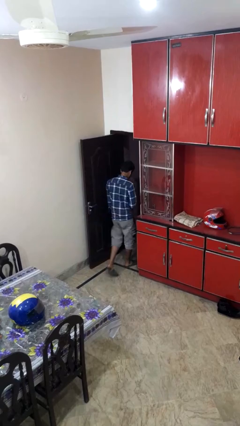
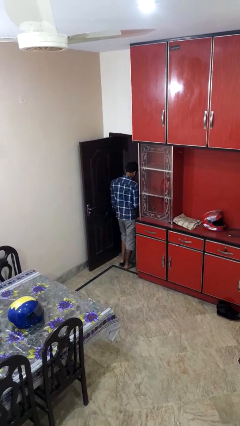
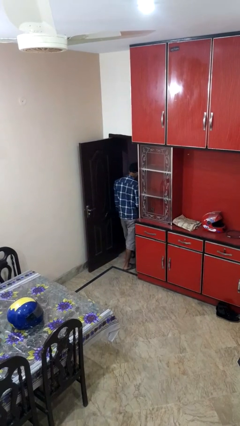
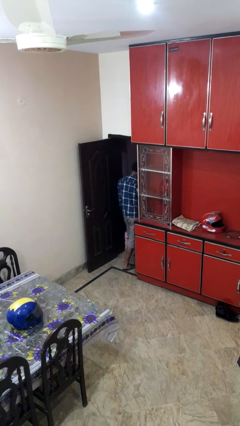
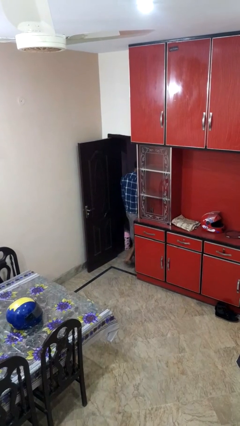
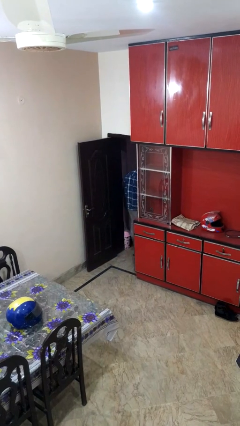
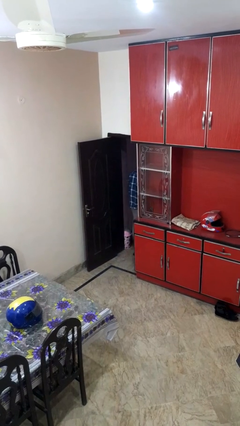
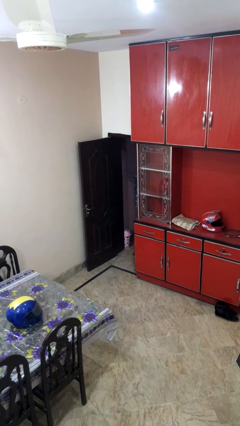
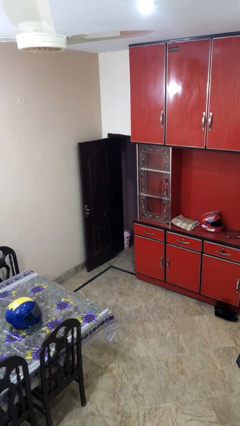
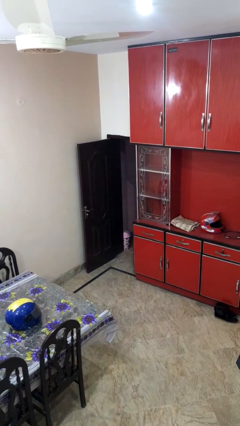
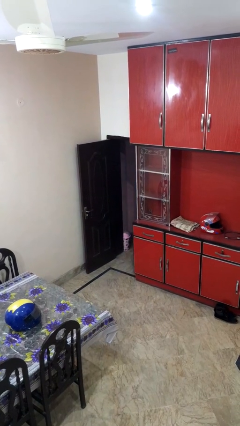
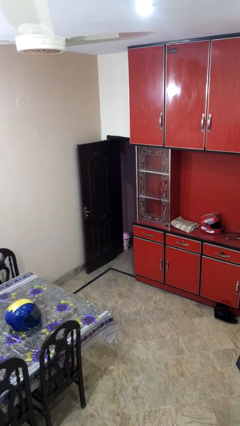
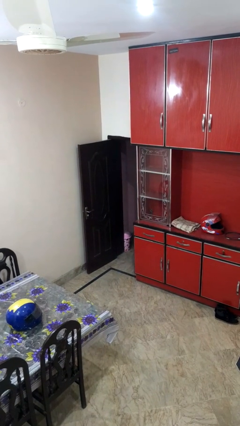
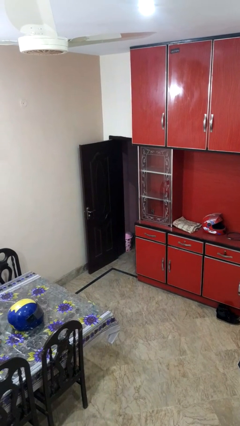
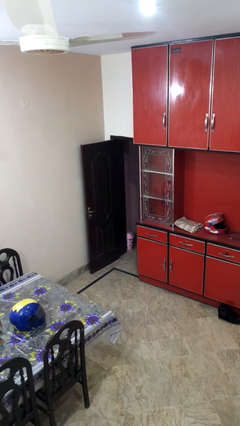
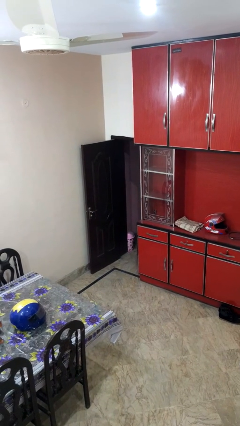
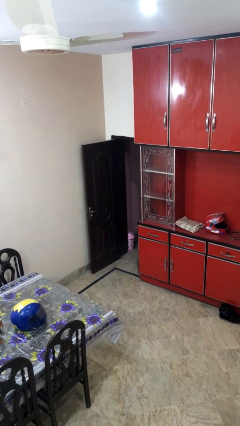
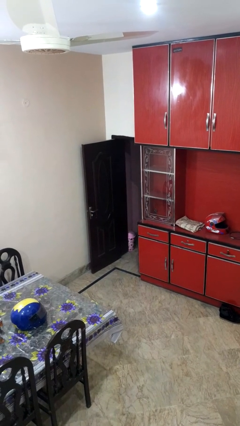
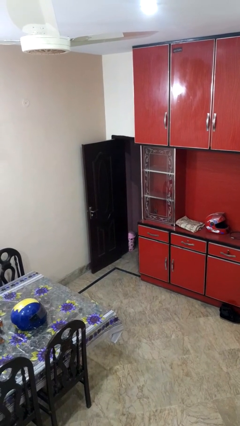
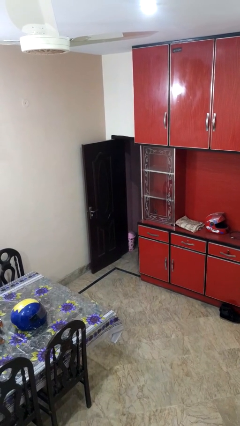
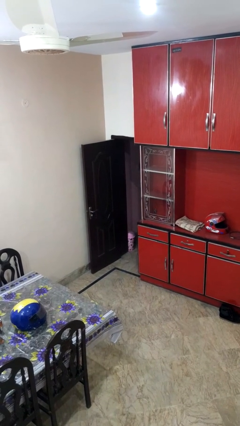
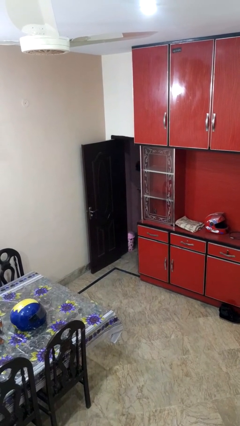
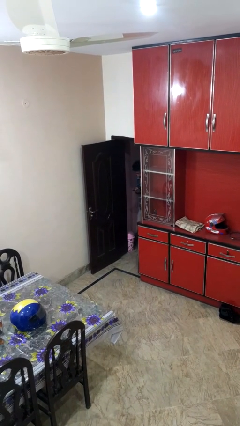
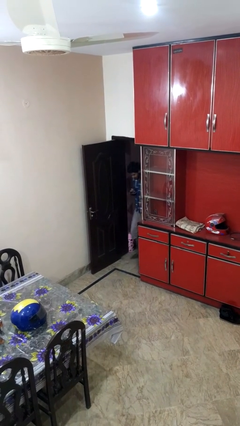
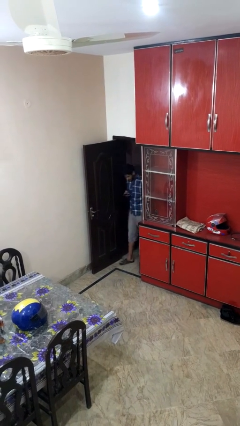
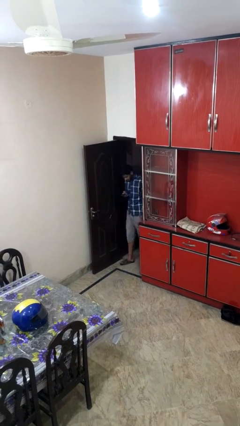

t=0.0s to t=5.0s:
person exits scene through structure

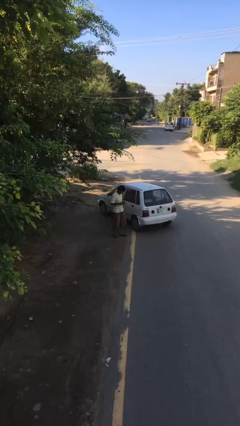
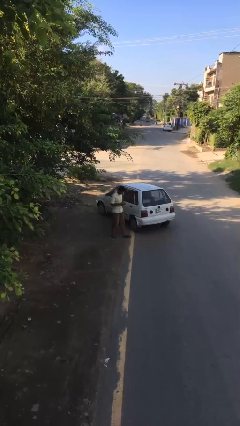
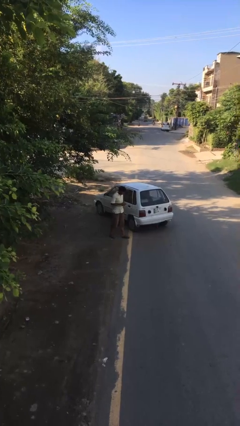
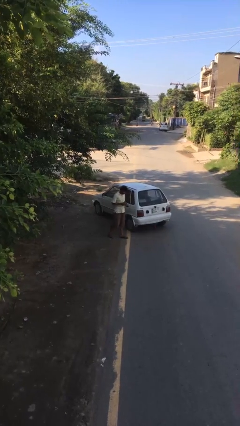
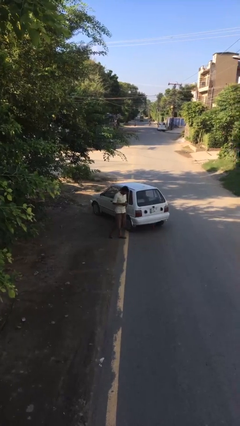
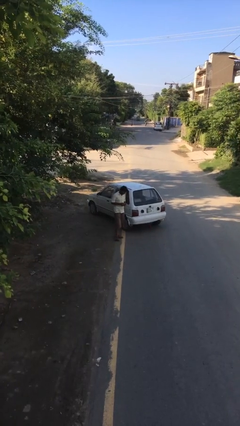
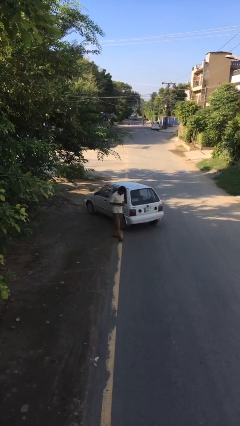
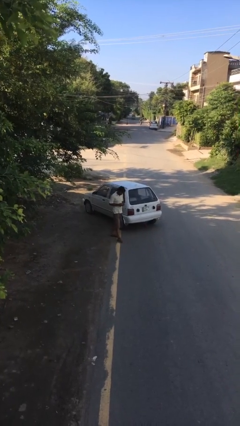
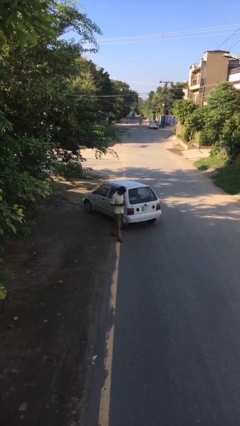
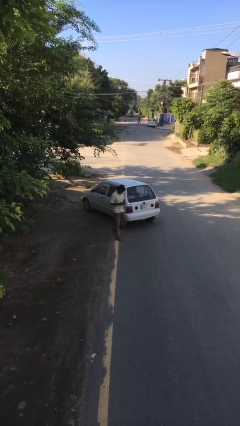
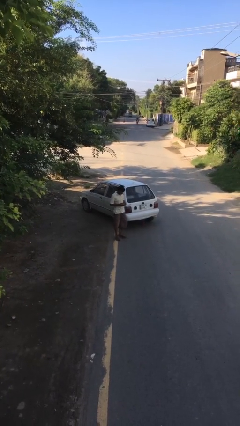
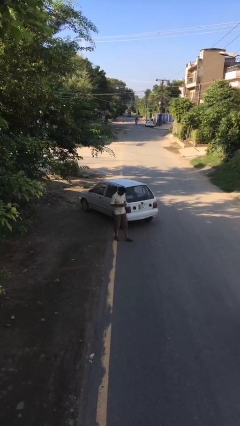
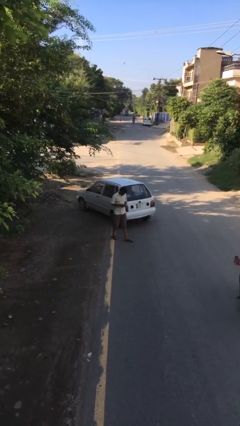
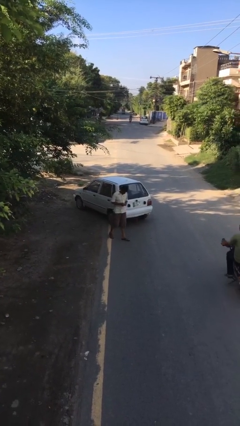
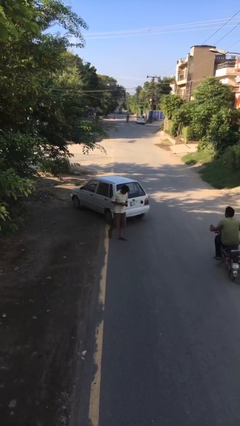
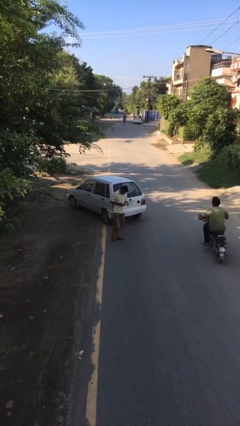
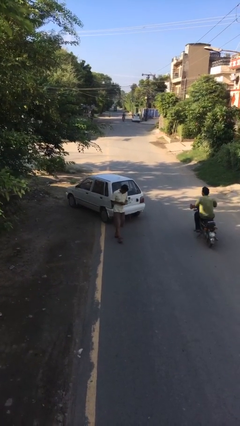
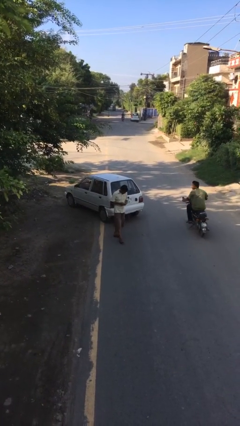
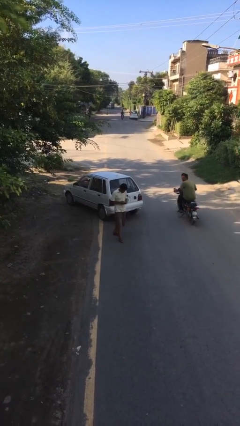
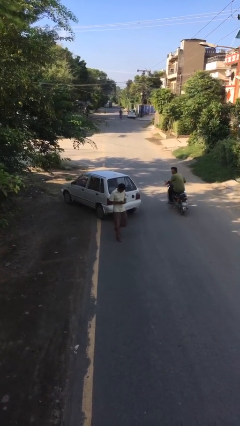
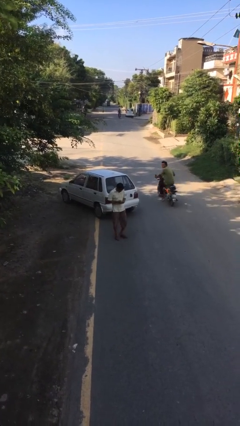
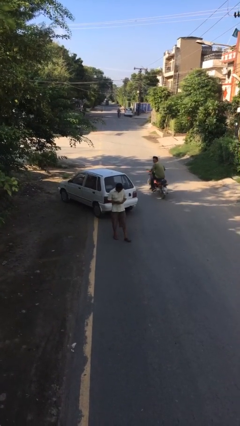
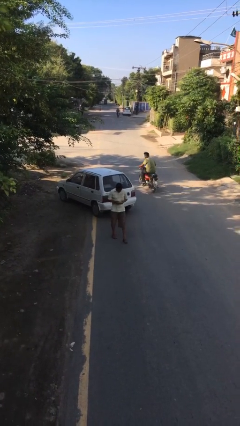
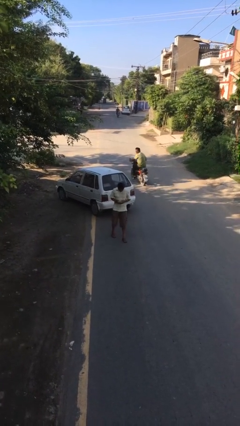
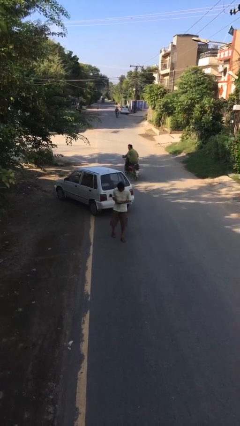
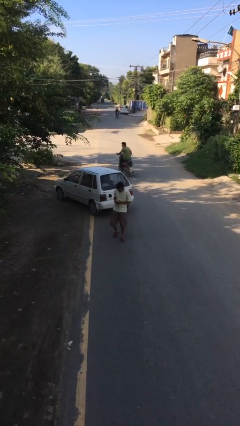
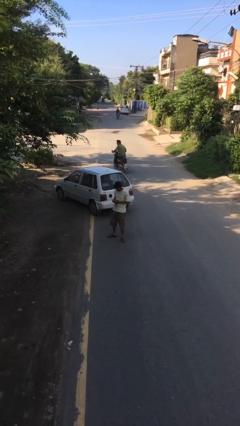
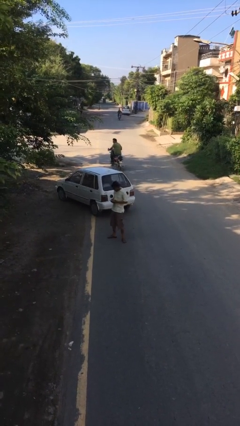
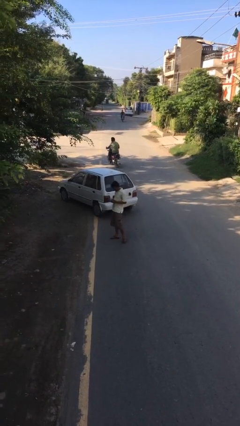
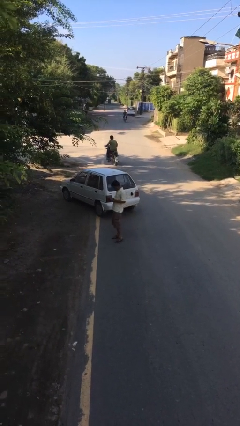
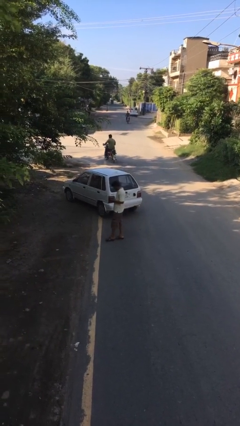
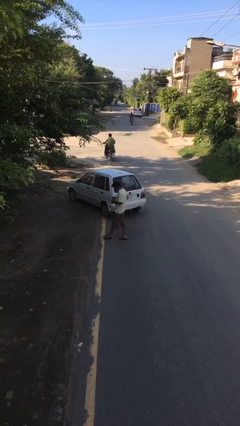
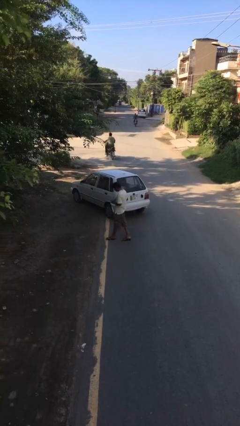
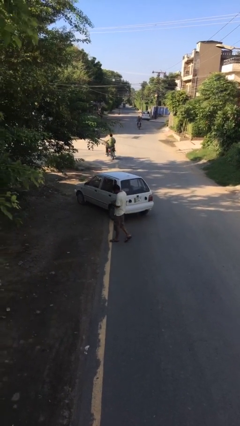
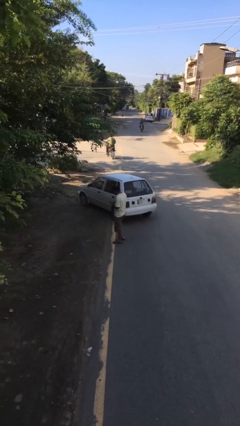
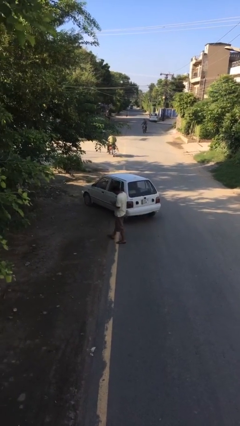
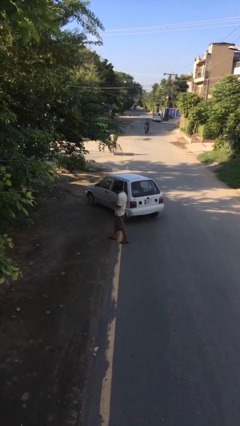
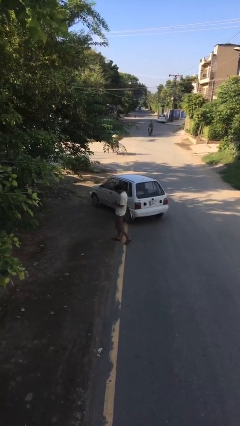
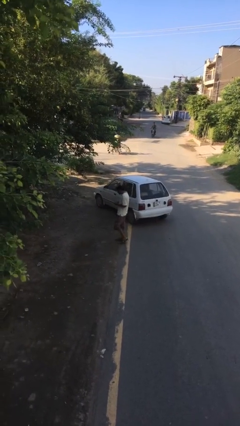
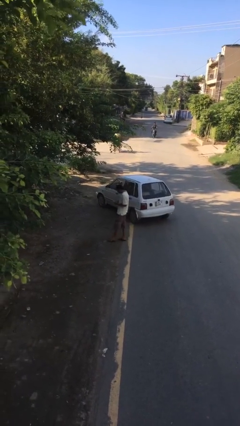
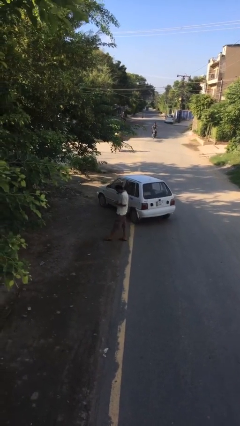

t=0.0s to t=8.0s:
person texts on phone

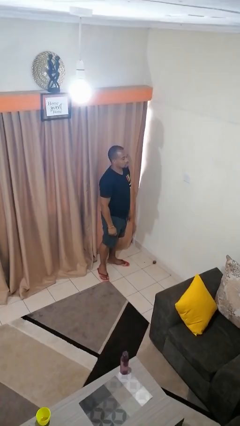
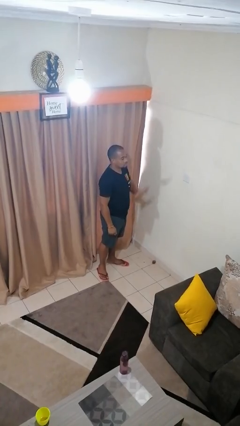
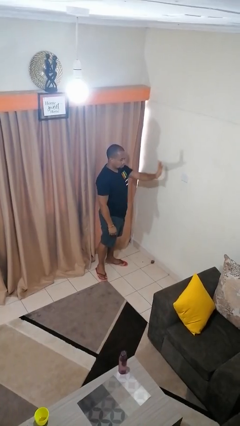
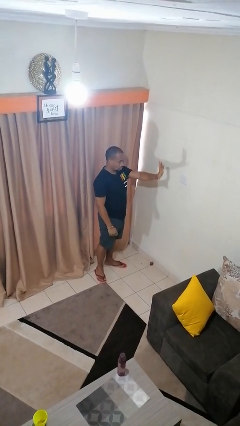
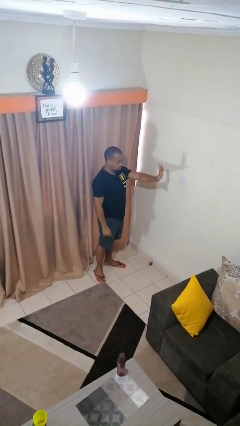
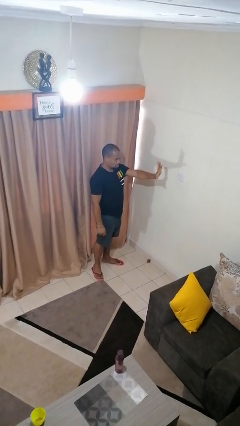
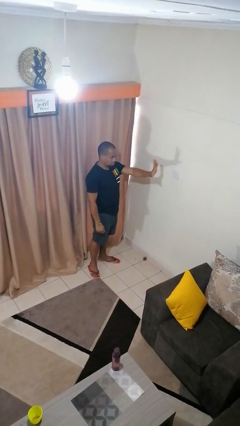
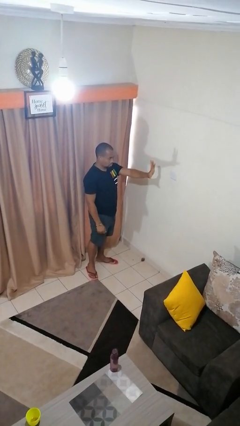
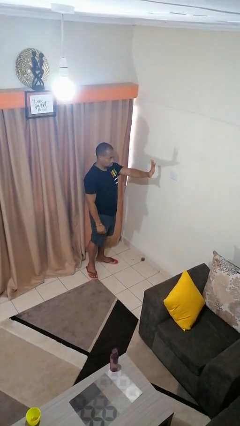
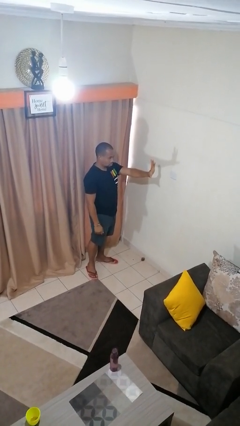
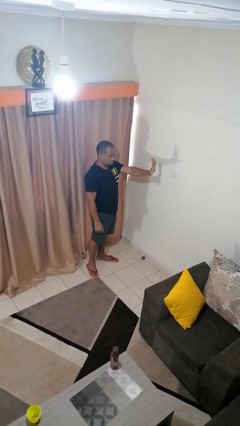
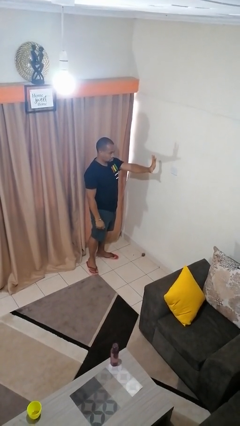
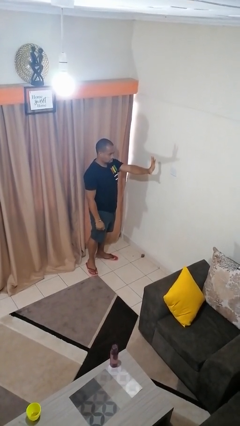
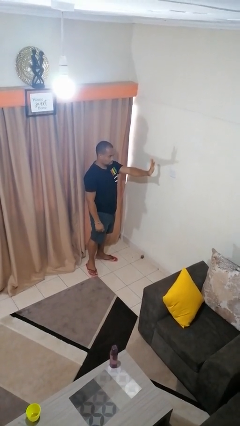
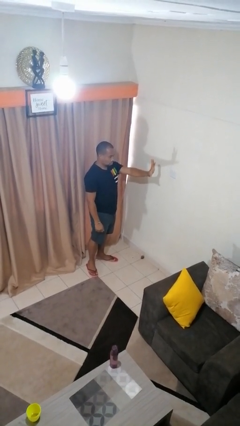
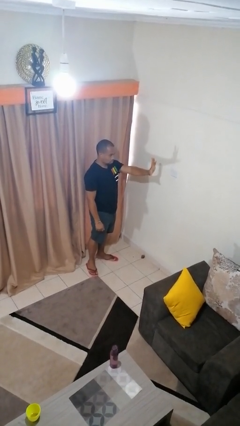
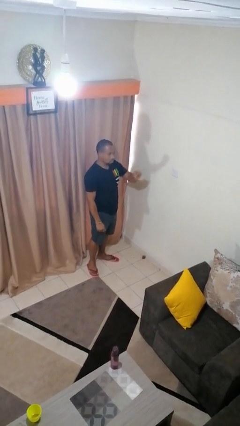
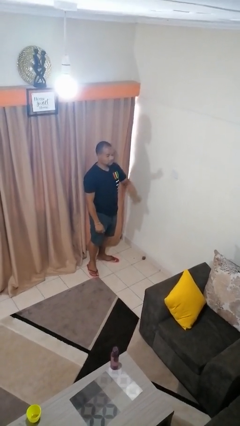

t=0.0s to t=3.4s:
person gestures number five

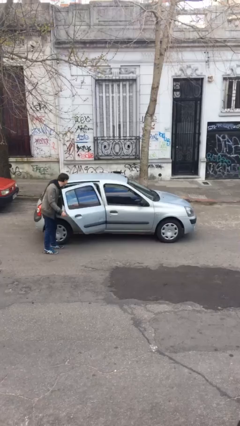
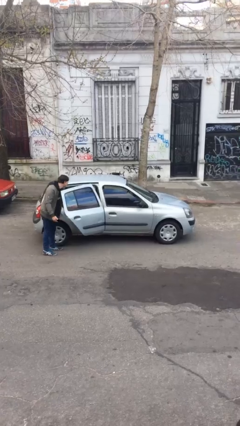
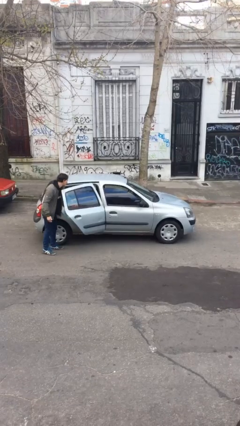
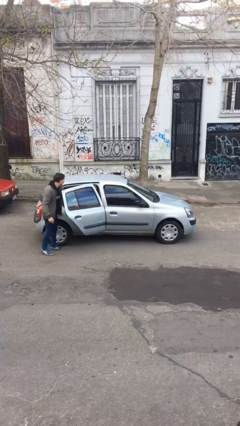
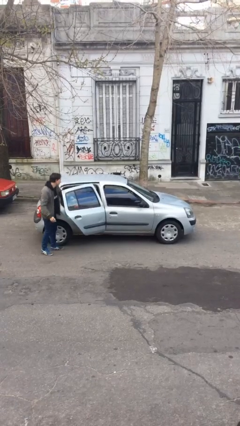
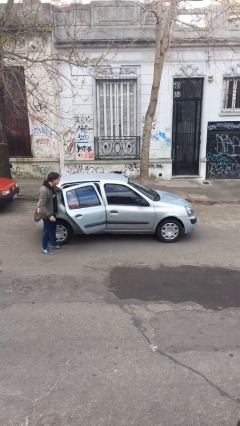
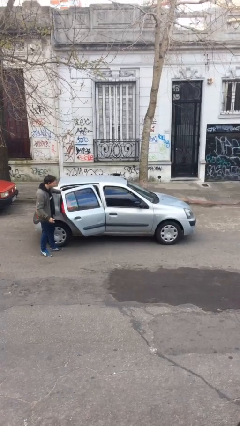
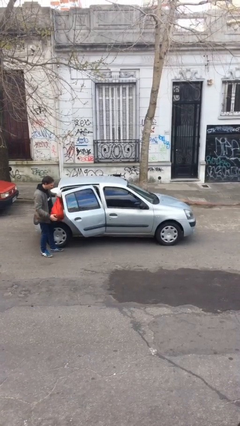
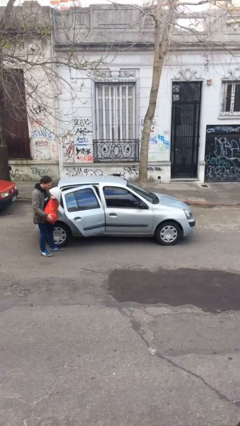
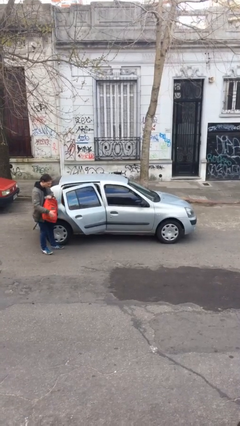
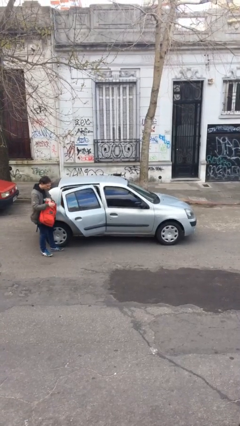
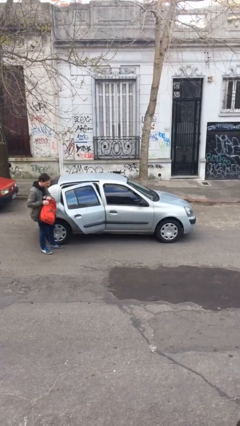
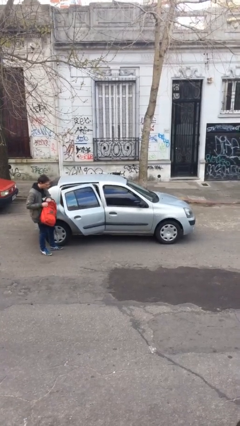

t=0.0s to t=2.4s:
person unloads car
